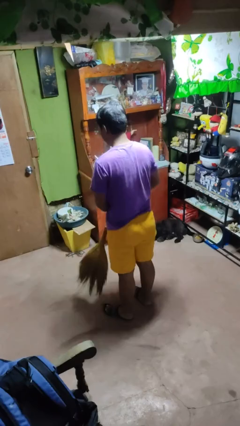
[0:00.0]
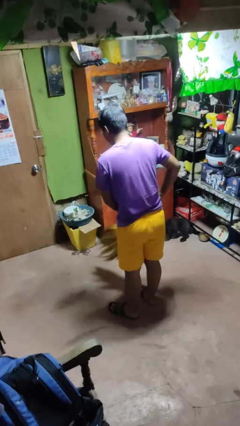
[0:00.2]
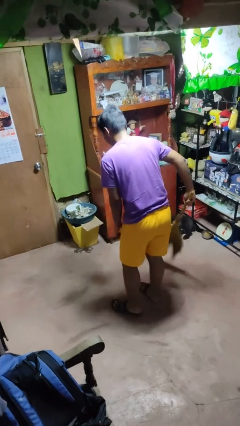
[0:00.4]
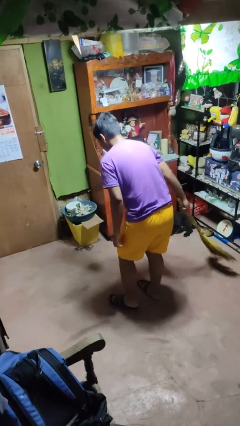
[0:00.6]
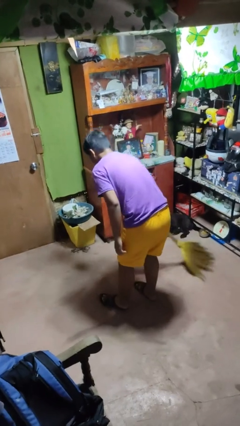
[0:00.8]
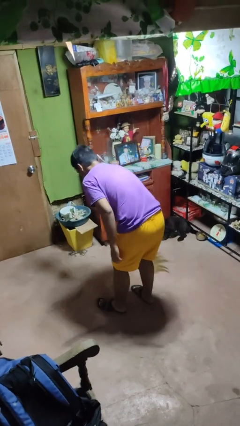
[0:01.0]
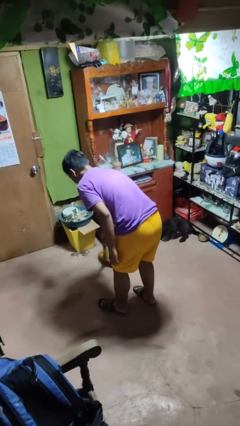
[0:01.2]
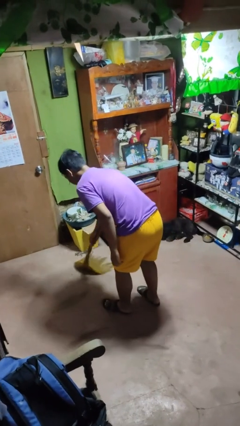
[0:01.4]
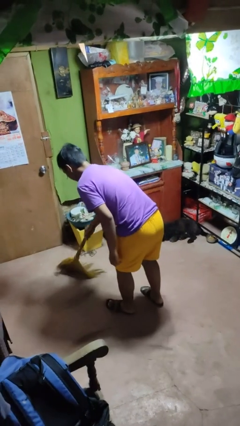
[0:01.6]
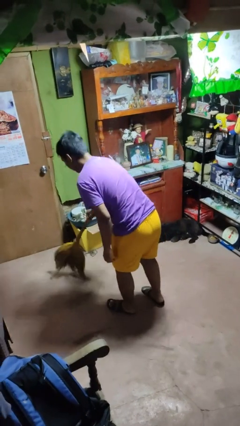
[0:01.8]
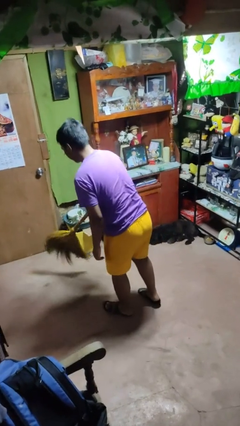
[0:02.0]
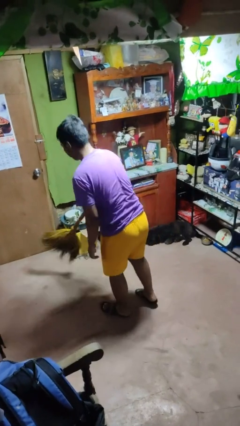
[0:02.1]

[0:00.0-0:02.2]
person sweeps floor

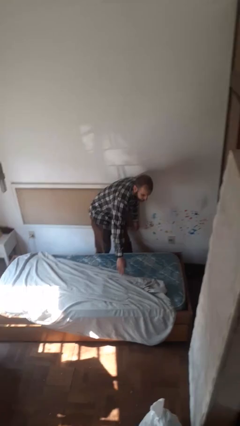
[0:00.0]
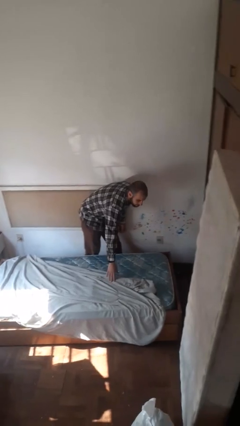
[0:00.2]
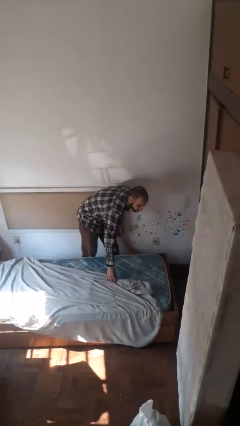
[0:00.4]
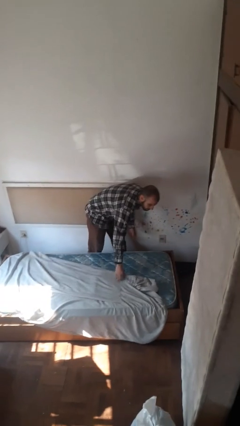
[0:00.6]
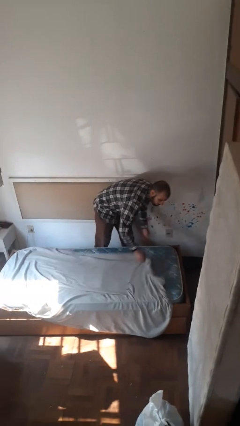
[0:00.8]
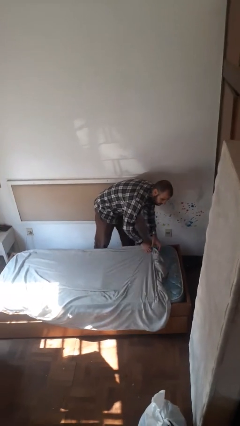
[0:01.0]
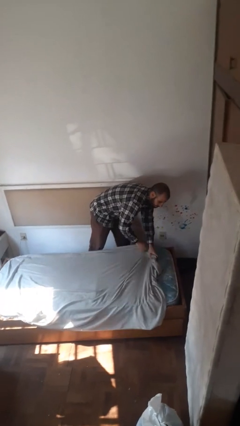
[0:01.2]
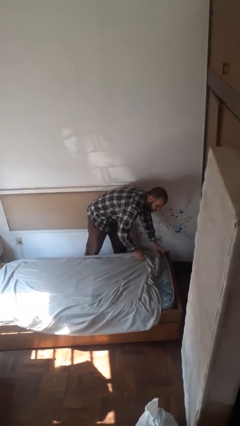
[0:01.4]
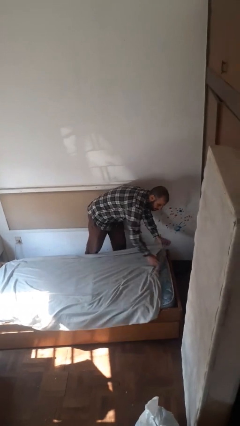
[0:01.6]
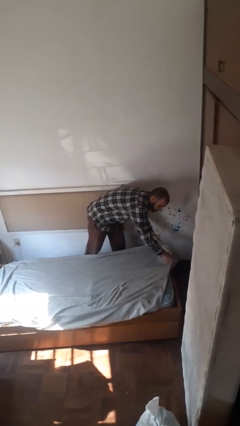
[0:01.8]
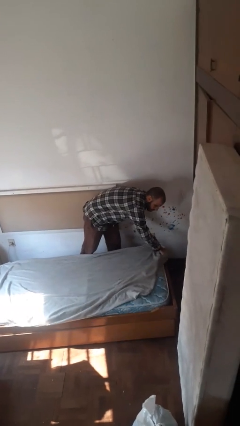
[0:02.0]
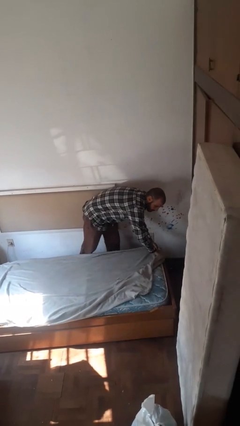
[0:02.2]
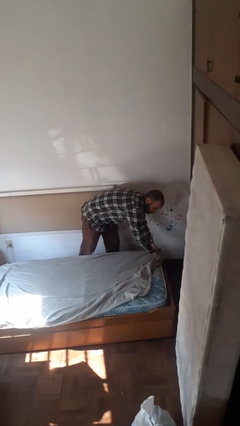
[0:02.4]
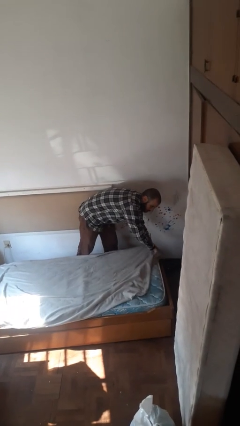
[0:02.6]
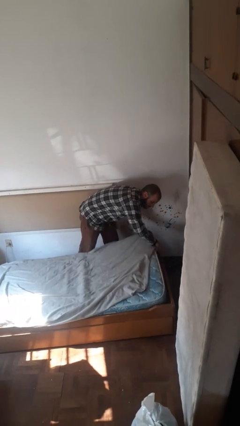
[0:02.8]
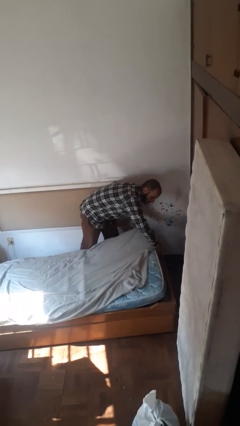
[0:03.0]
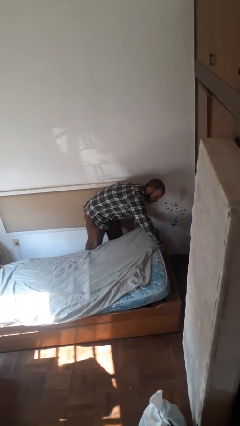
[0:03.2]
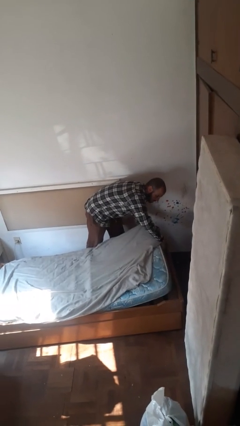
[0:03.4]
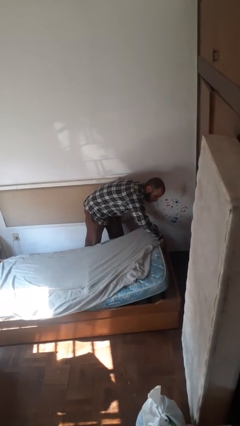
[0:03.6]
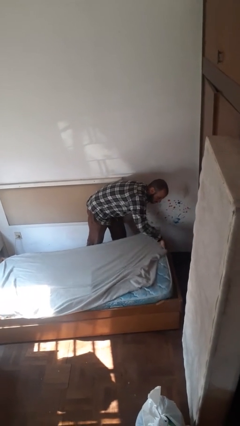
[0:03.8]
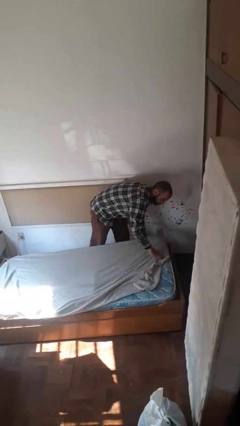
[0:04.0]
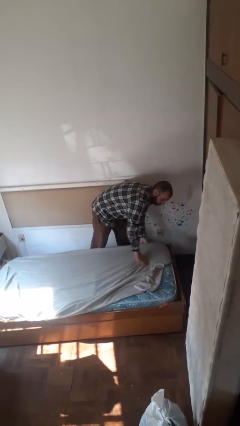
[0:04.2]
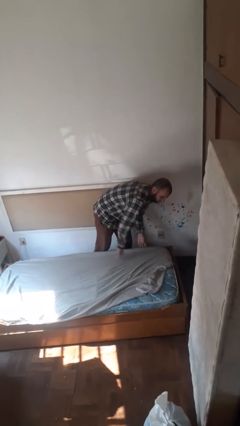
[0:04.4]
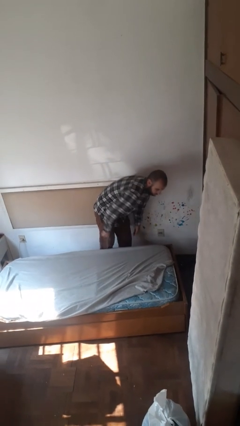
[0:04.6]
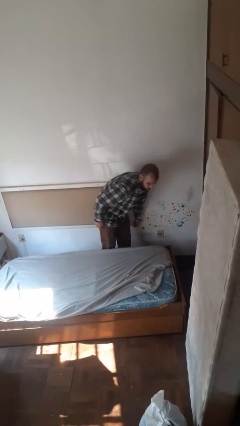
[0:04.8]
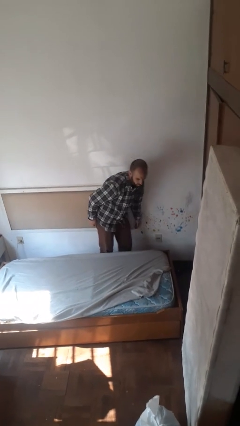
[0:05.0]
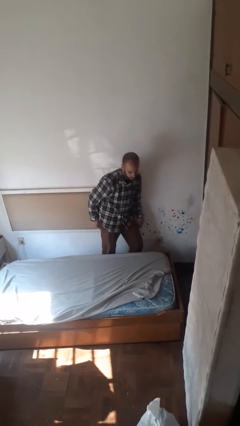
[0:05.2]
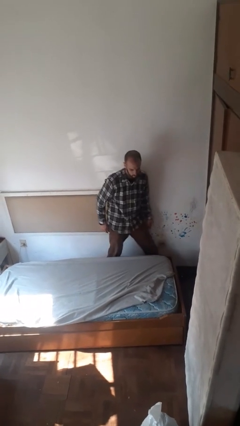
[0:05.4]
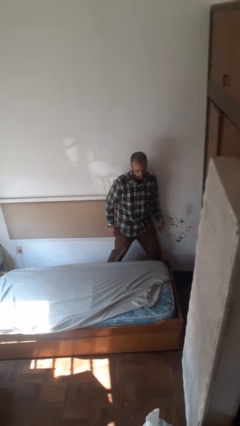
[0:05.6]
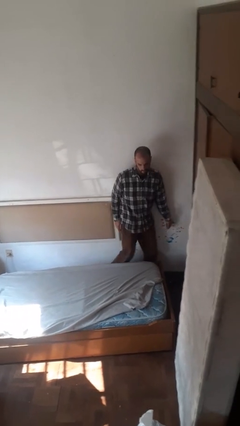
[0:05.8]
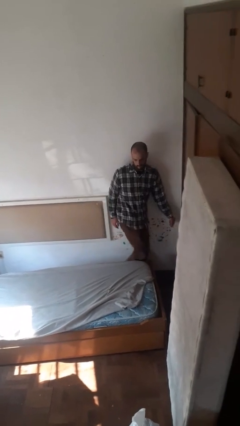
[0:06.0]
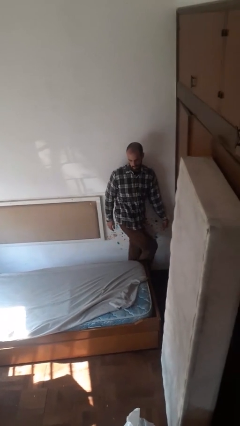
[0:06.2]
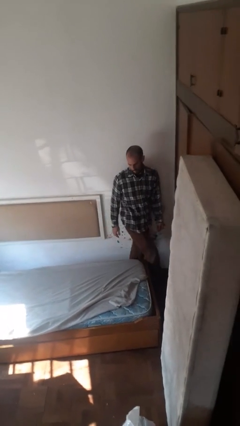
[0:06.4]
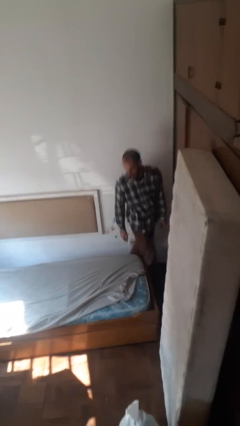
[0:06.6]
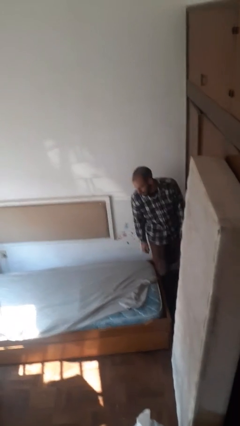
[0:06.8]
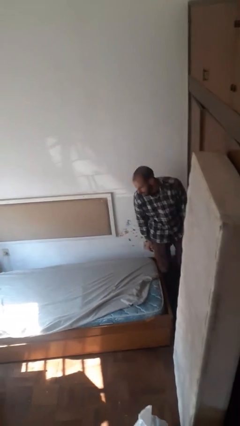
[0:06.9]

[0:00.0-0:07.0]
person makes bed

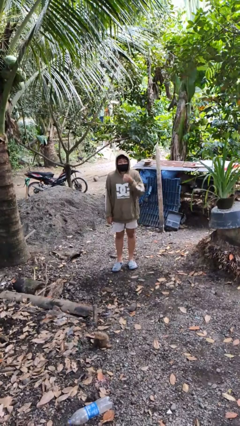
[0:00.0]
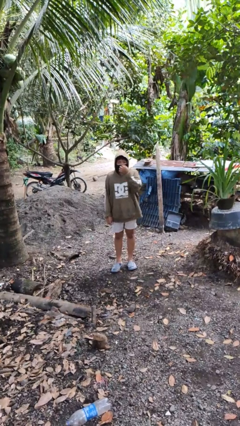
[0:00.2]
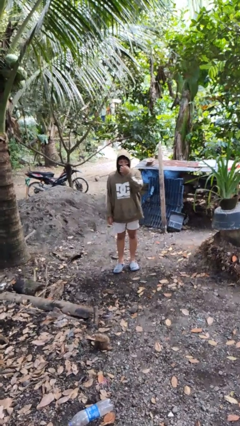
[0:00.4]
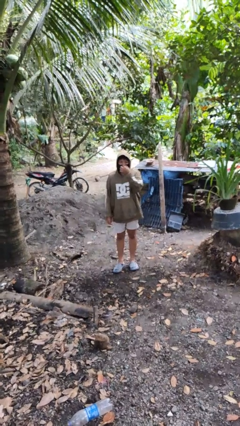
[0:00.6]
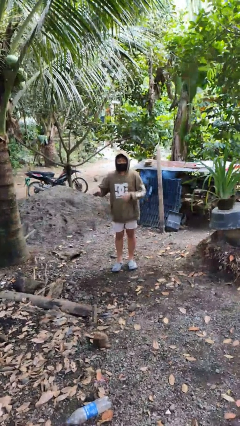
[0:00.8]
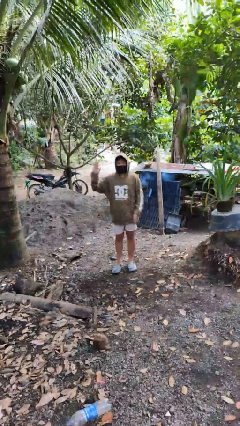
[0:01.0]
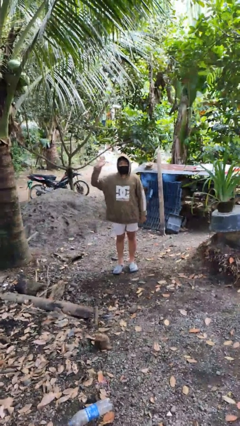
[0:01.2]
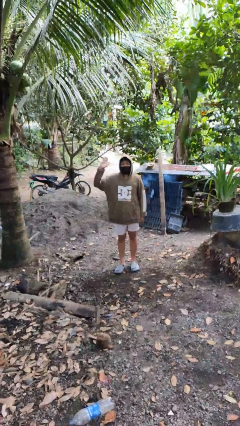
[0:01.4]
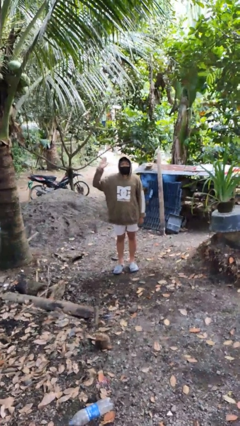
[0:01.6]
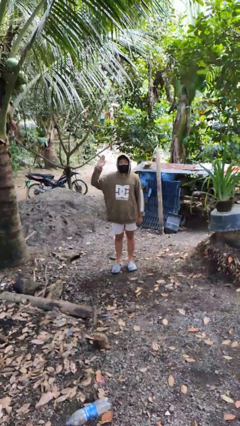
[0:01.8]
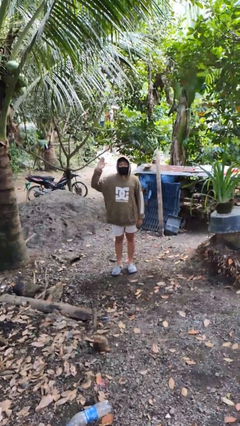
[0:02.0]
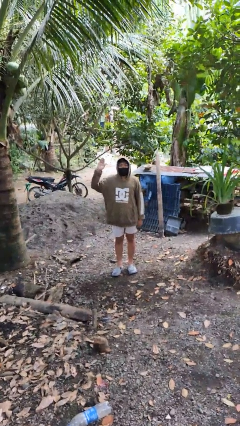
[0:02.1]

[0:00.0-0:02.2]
person gestures number five

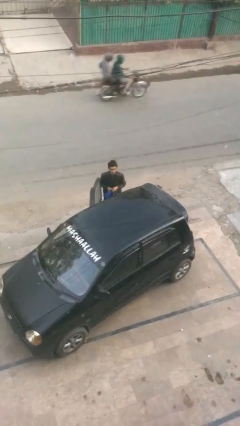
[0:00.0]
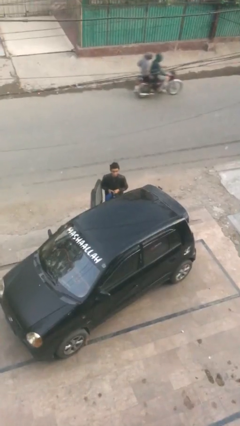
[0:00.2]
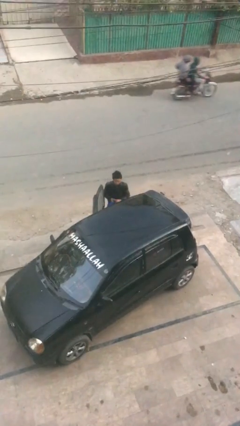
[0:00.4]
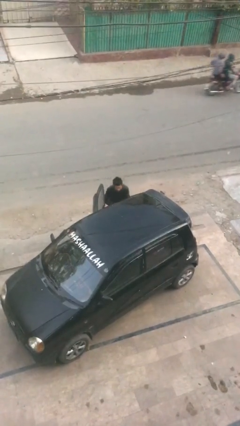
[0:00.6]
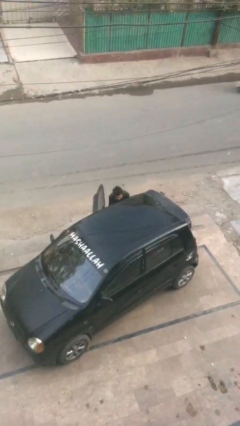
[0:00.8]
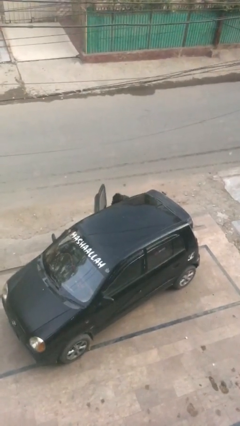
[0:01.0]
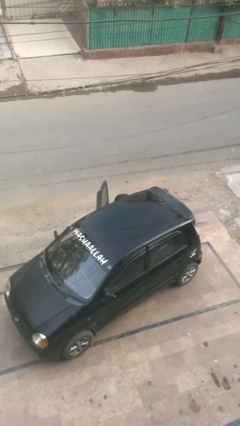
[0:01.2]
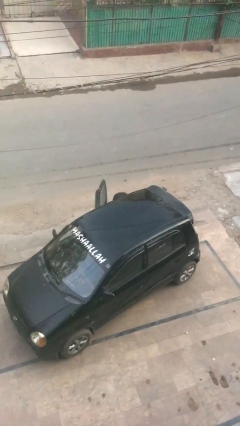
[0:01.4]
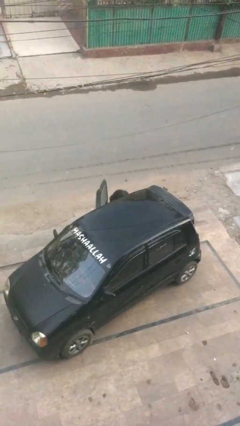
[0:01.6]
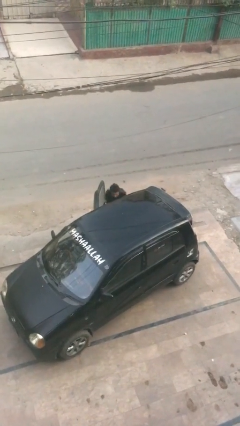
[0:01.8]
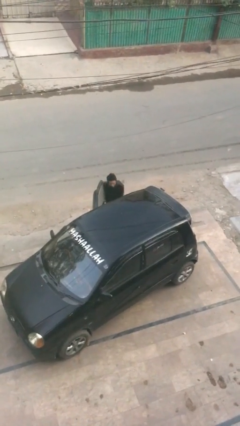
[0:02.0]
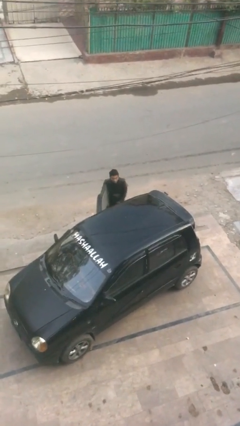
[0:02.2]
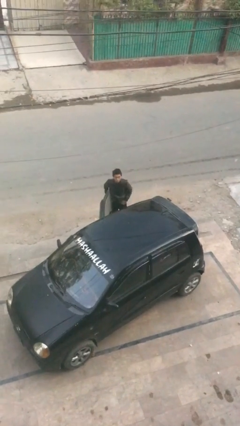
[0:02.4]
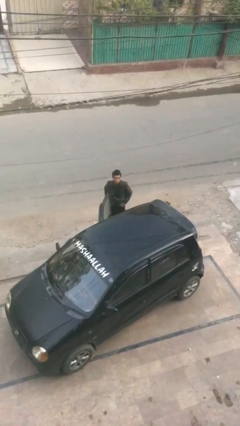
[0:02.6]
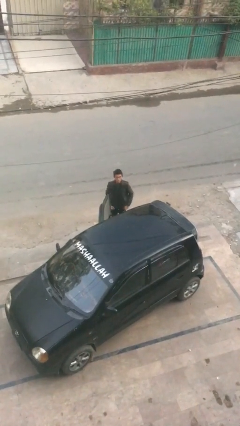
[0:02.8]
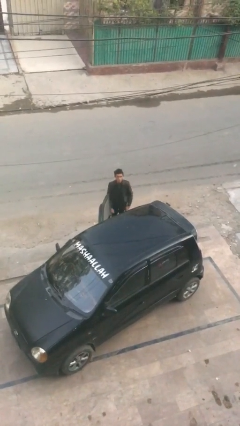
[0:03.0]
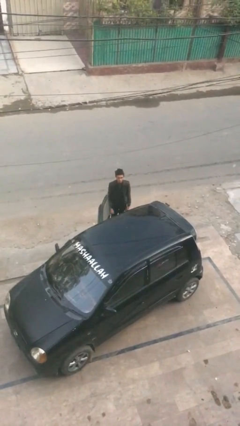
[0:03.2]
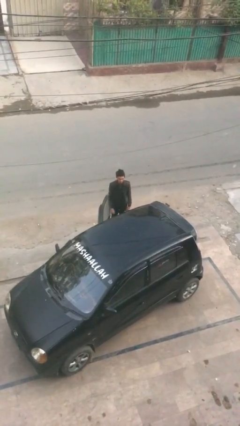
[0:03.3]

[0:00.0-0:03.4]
person loads car

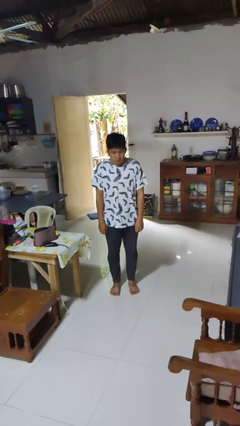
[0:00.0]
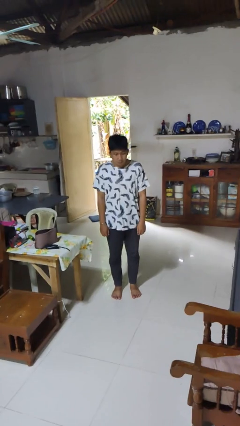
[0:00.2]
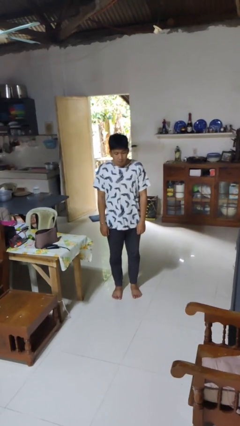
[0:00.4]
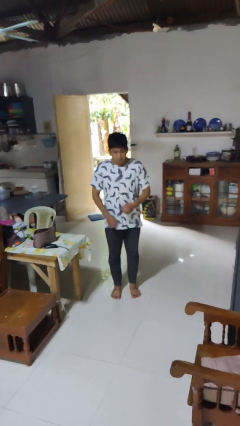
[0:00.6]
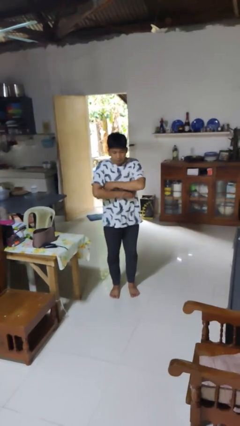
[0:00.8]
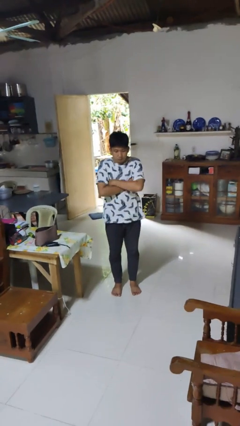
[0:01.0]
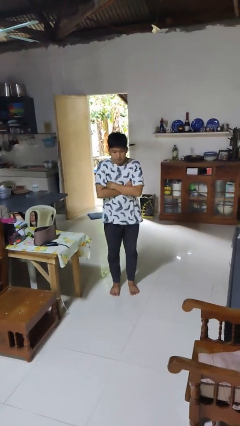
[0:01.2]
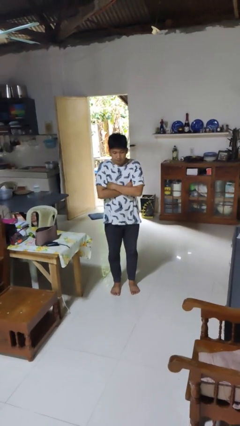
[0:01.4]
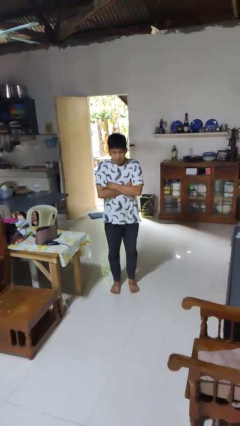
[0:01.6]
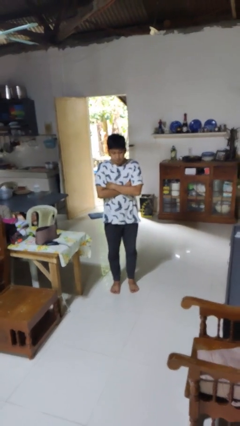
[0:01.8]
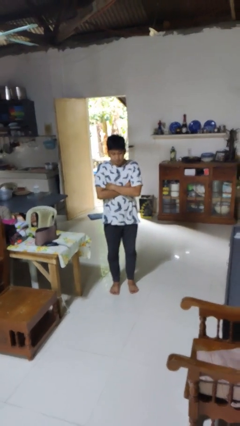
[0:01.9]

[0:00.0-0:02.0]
person gestures arms x

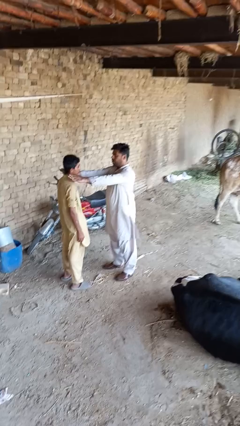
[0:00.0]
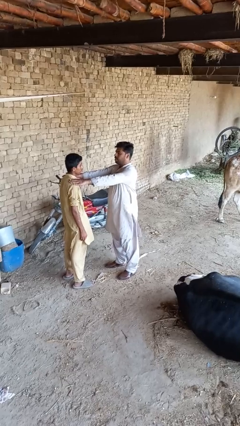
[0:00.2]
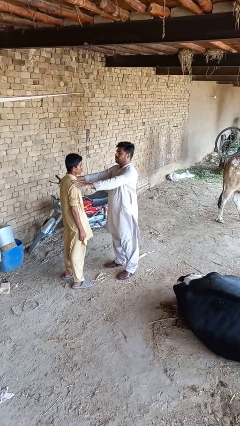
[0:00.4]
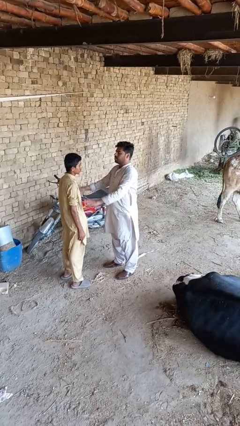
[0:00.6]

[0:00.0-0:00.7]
person pounds shoulders of person
